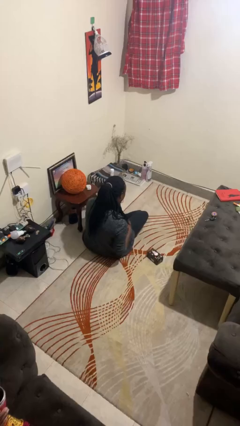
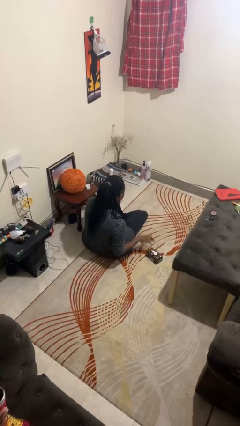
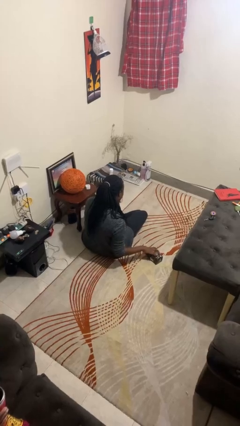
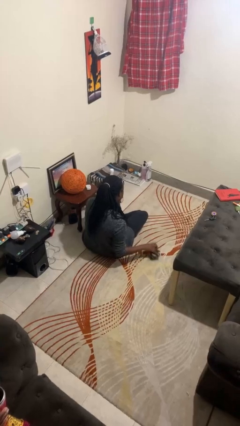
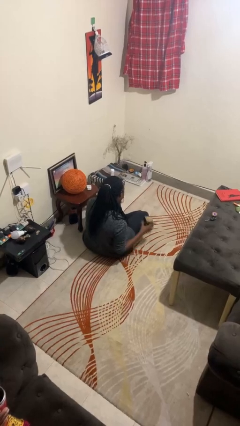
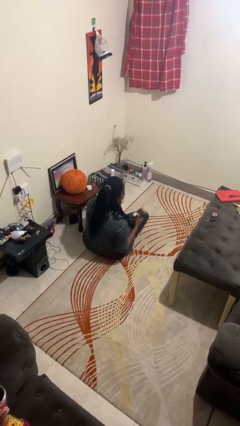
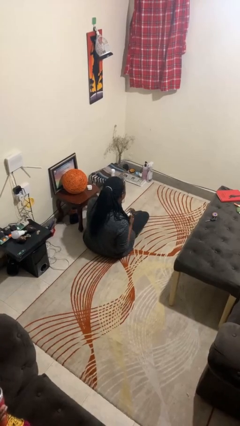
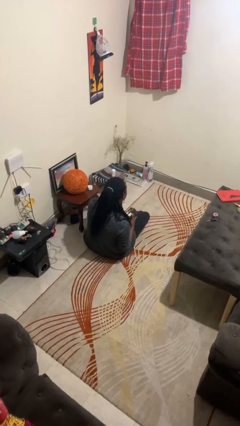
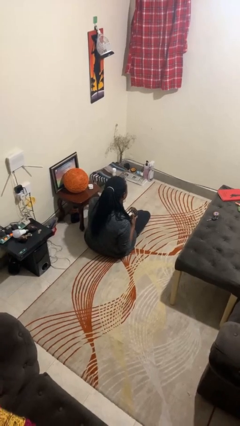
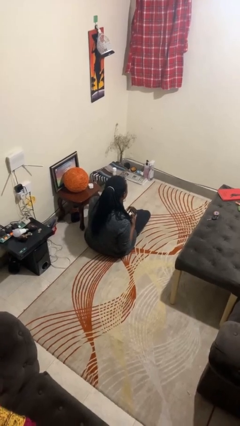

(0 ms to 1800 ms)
person picks up object from floor

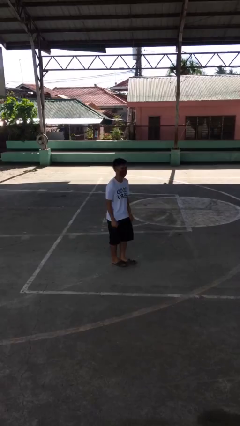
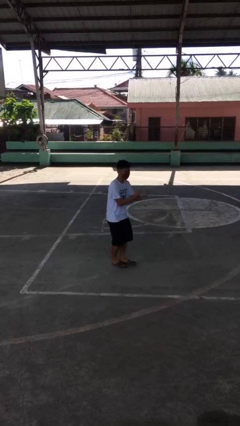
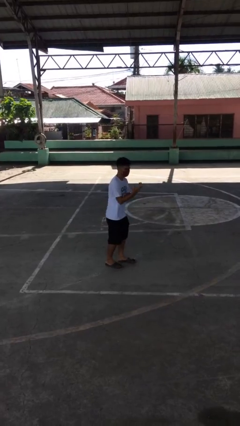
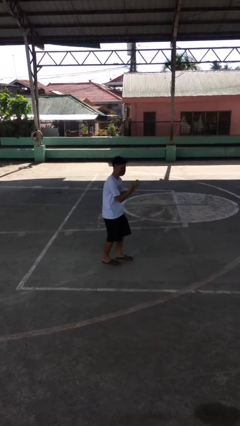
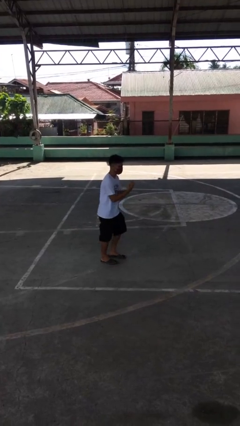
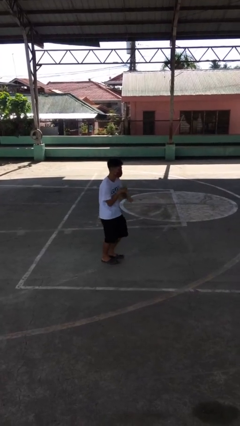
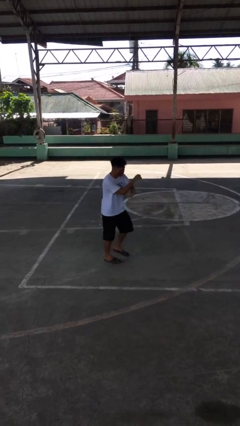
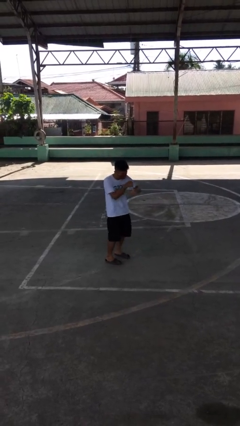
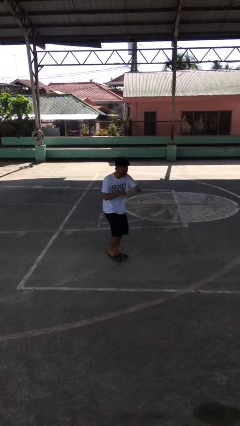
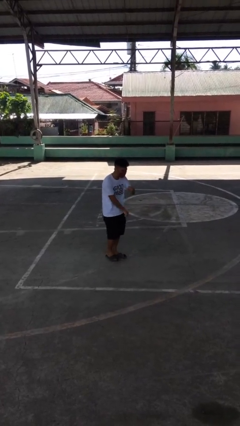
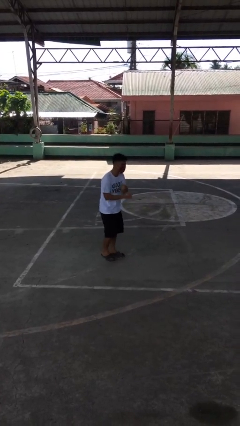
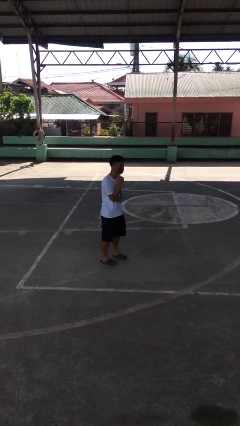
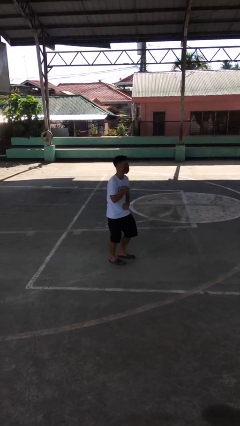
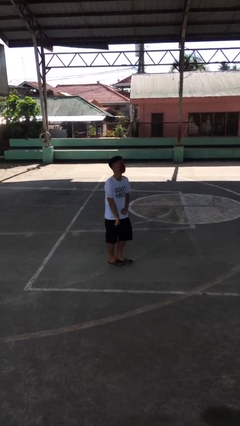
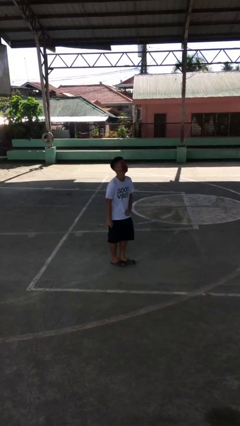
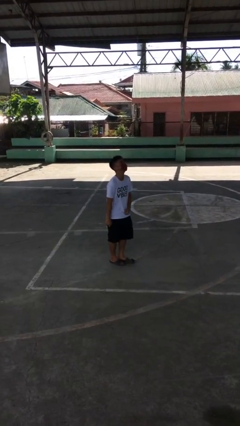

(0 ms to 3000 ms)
person dances in place

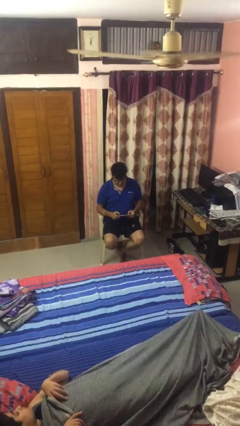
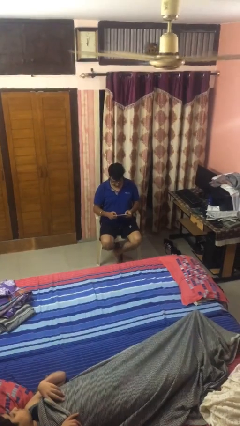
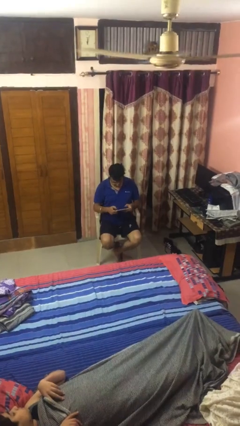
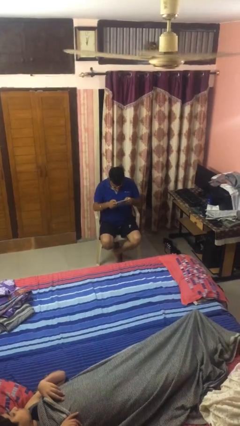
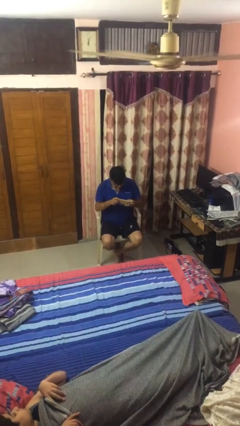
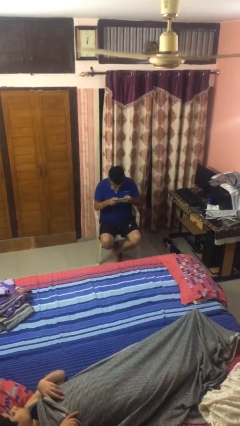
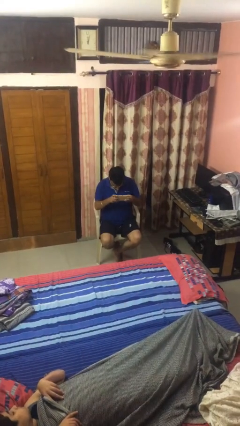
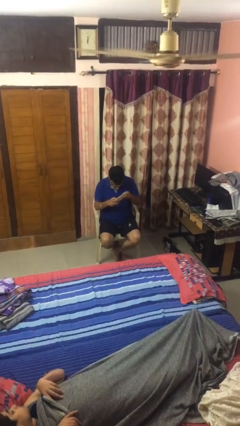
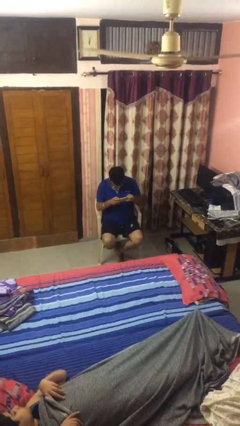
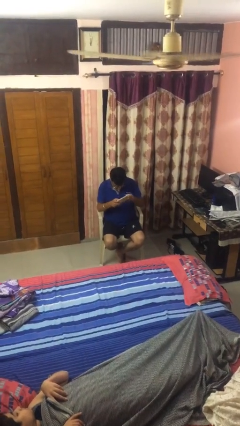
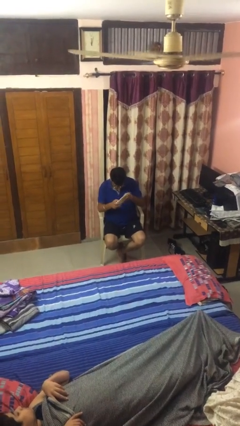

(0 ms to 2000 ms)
person interacts with handheld game

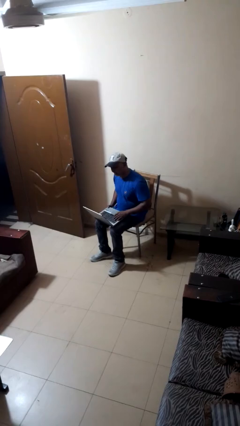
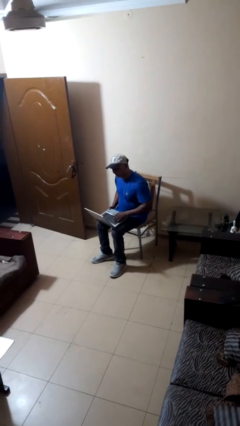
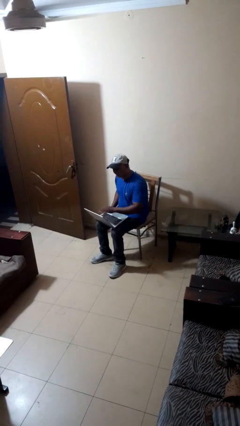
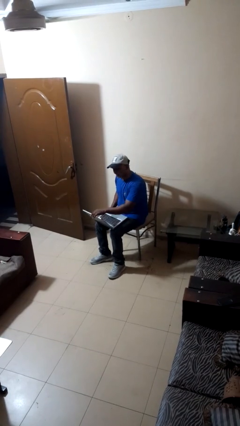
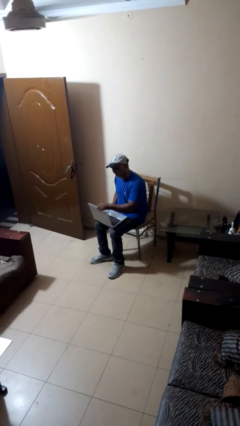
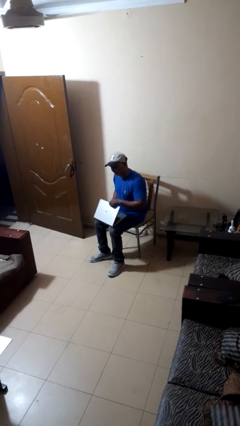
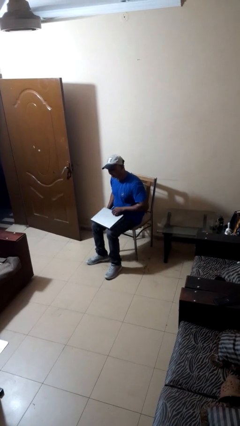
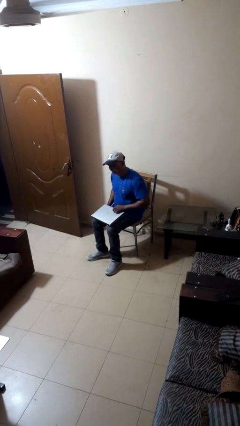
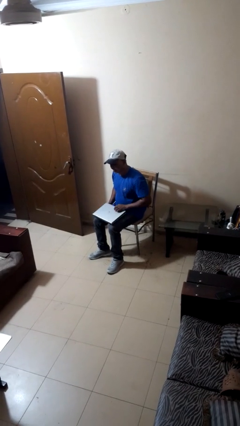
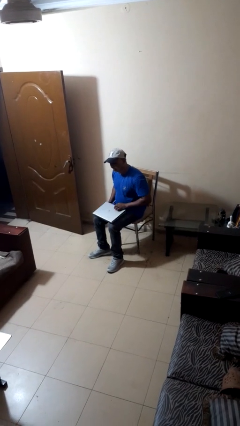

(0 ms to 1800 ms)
person closes laptop

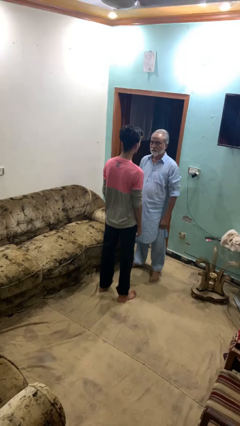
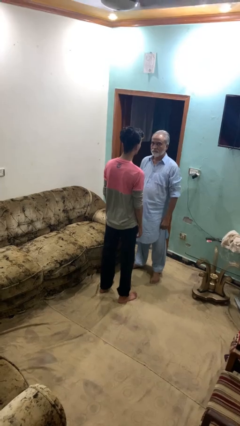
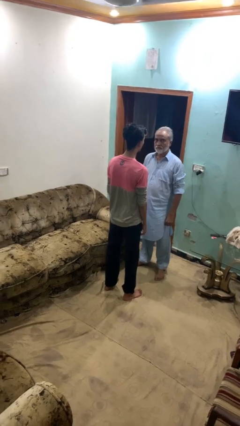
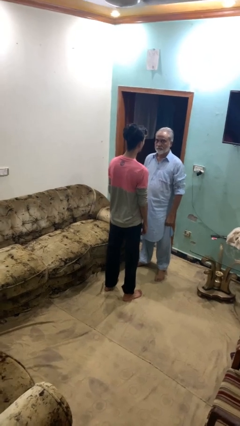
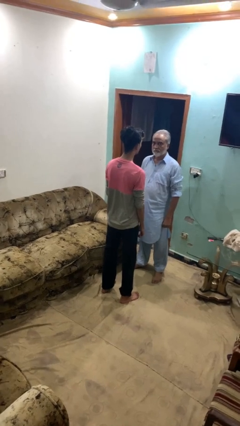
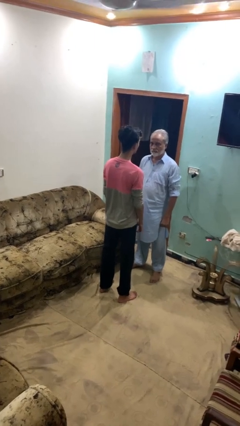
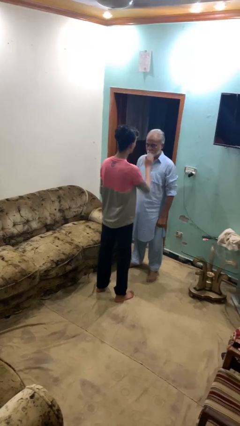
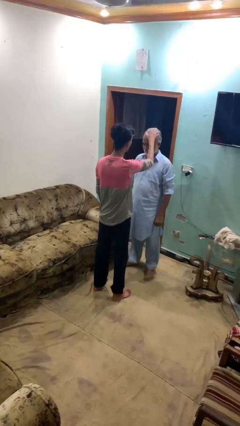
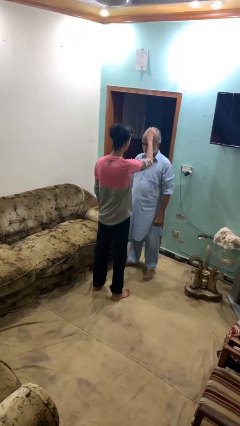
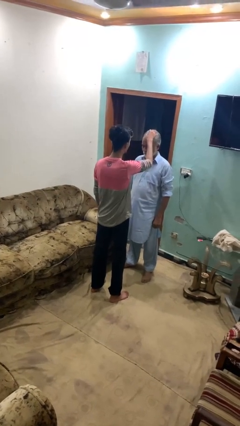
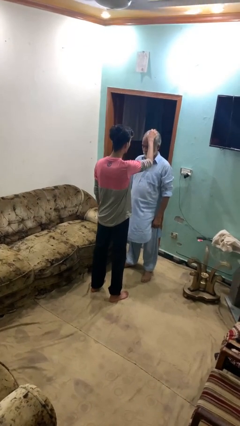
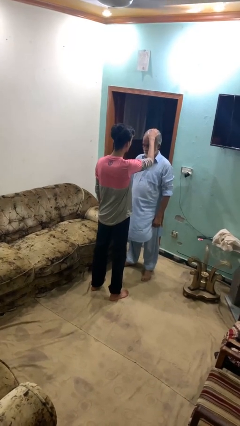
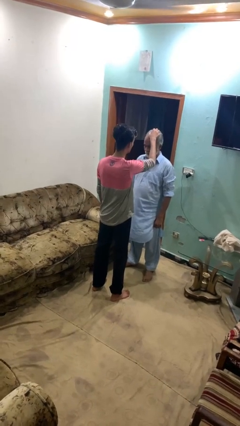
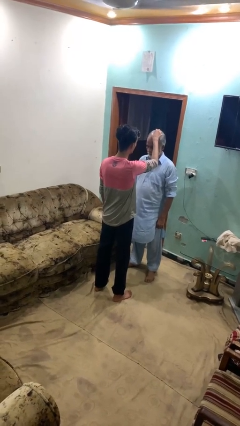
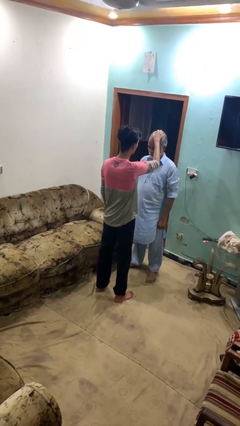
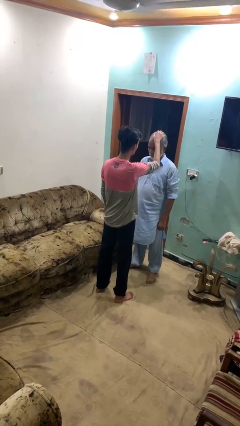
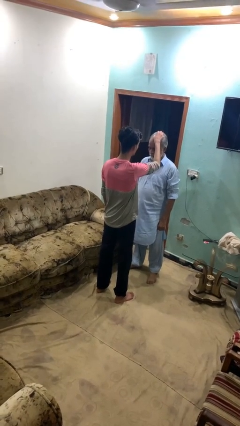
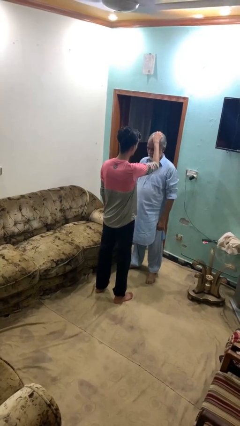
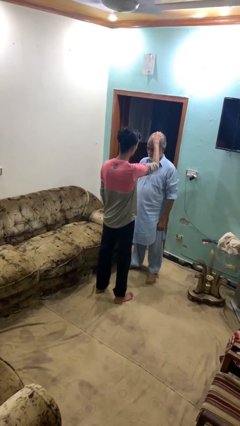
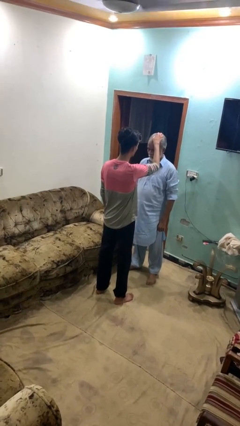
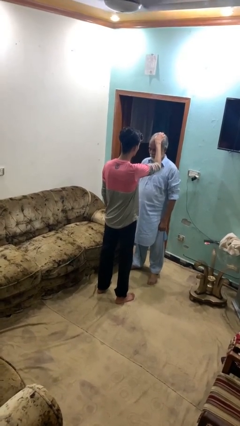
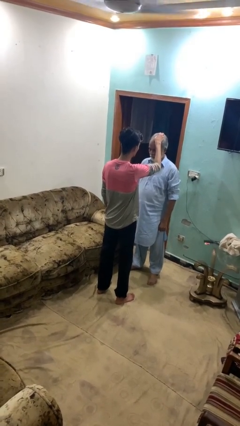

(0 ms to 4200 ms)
person grabs person by hair

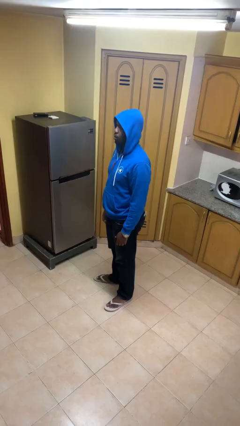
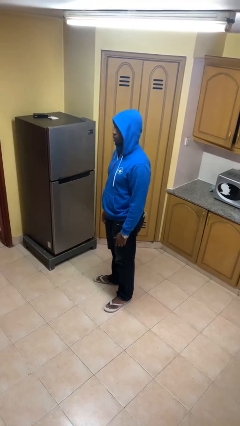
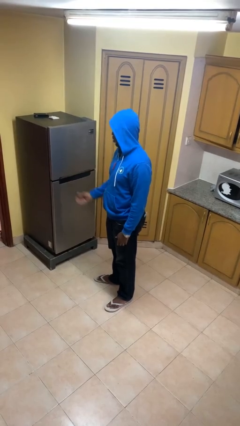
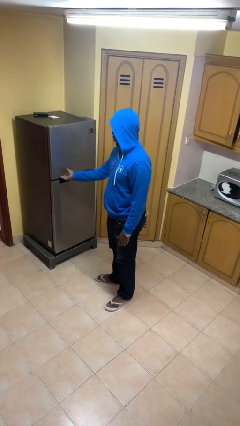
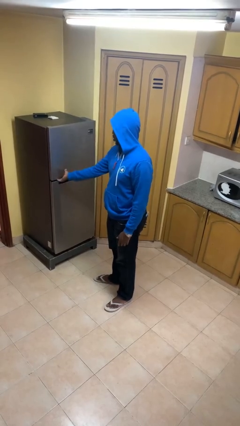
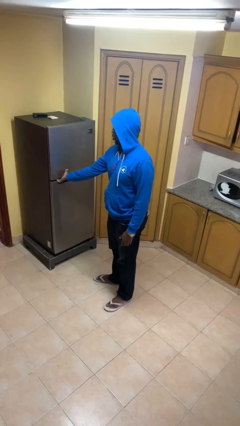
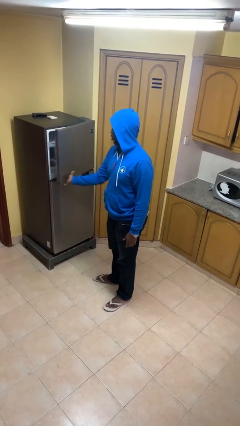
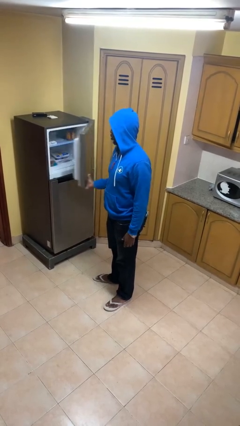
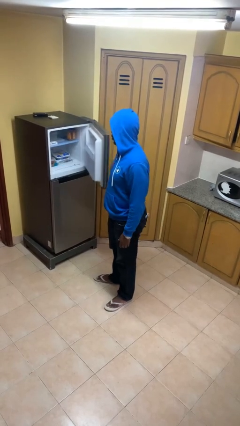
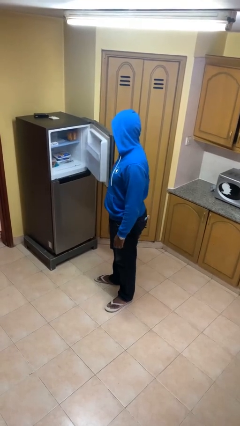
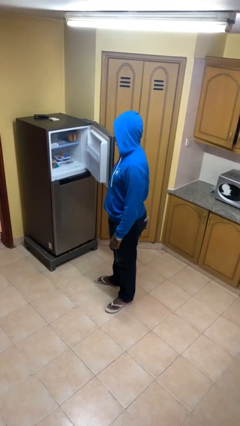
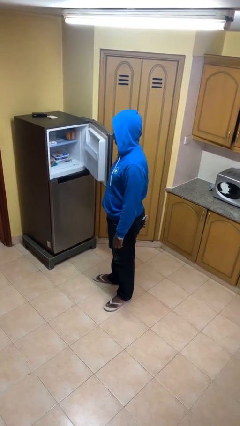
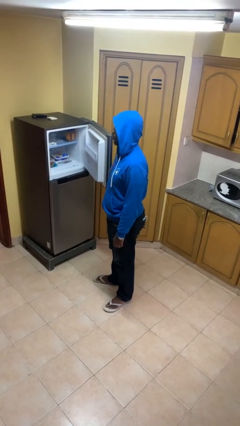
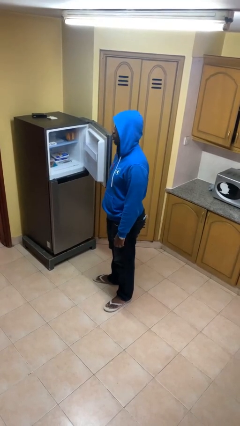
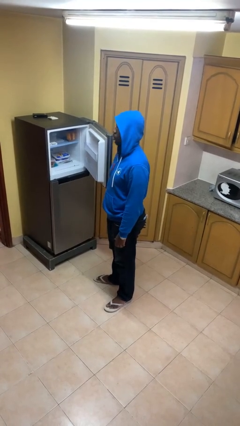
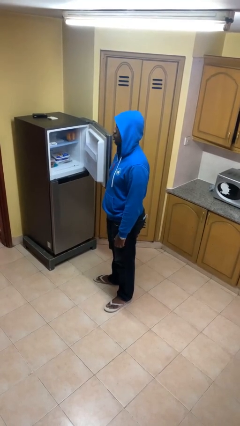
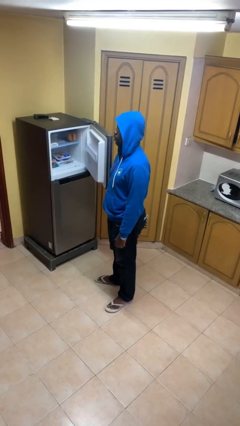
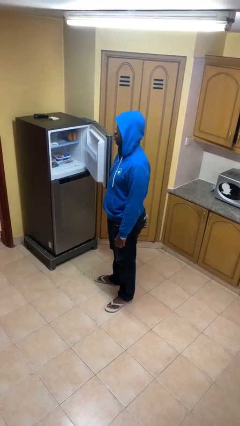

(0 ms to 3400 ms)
person opens refrigerator

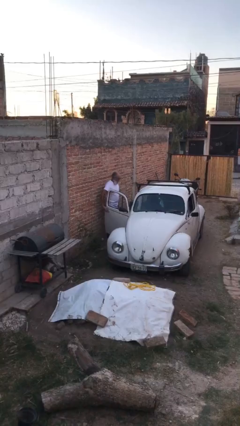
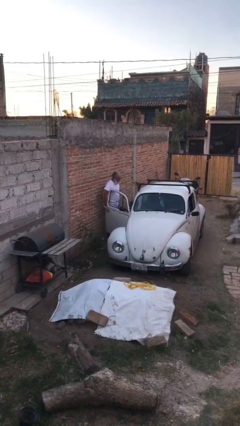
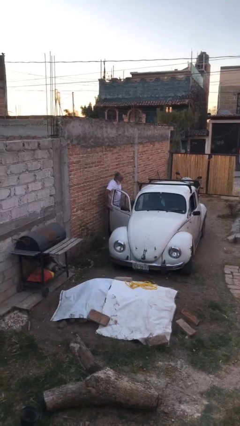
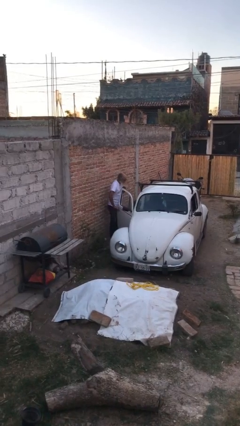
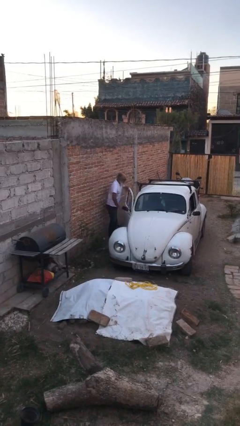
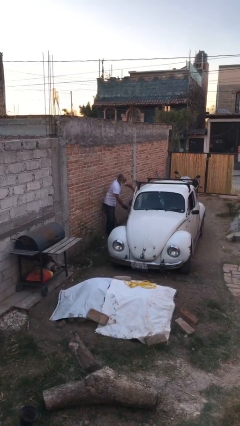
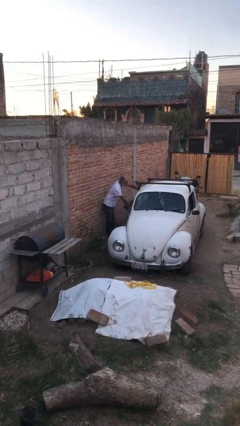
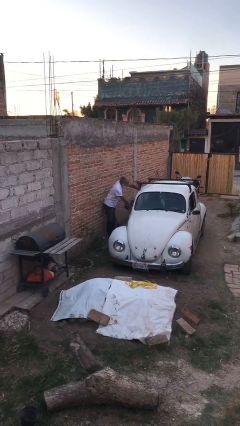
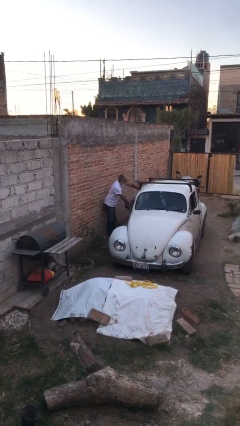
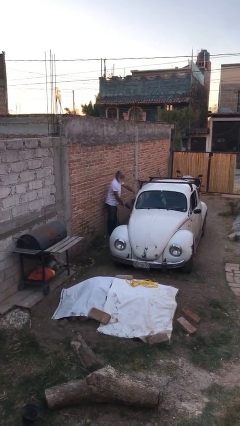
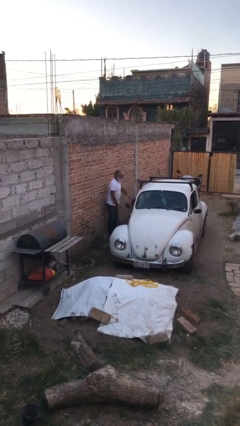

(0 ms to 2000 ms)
person closes car door
